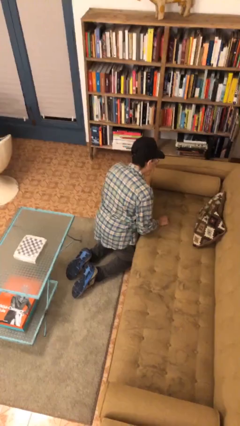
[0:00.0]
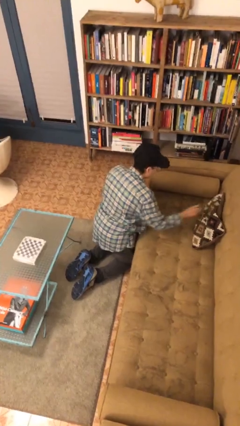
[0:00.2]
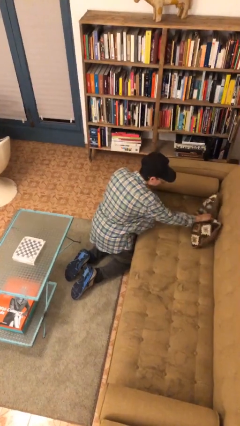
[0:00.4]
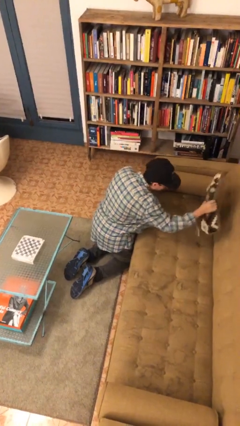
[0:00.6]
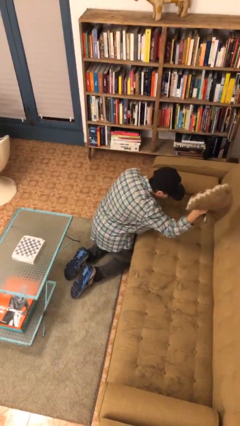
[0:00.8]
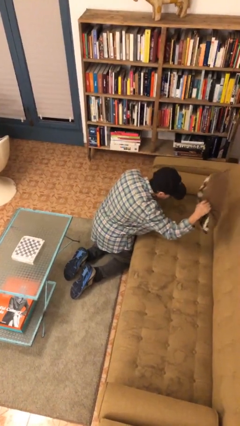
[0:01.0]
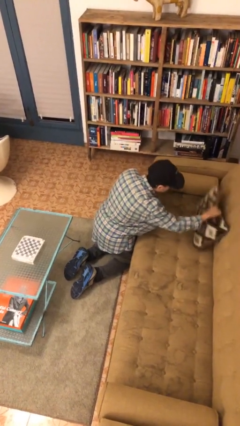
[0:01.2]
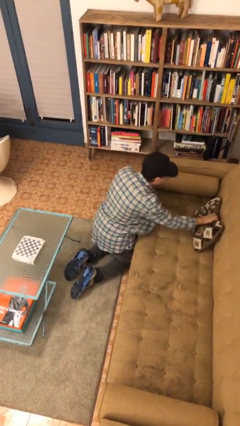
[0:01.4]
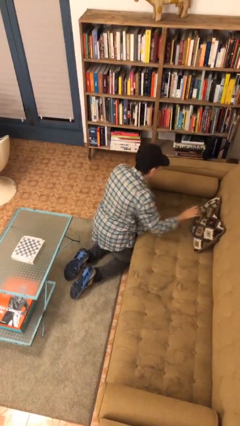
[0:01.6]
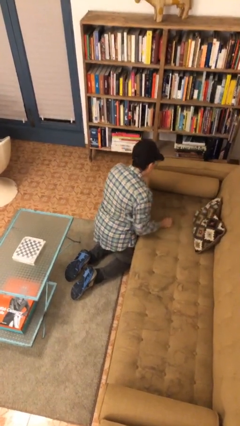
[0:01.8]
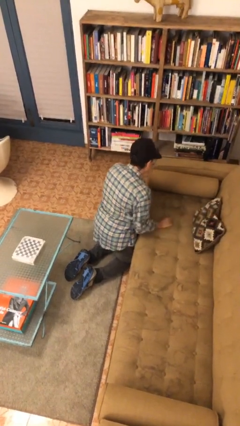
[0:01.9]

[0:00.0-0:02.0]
person searches in couch

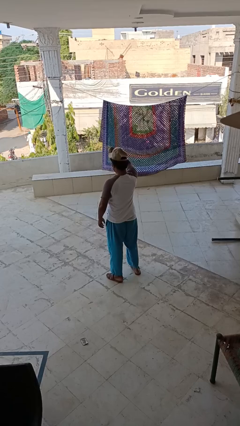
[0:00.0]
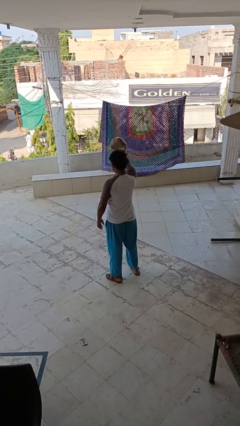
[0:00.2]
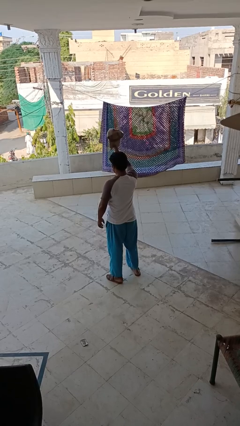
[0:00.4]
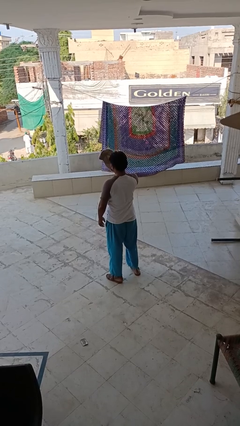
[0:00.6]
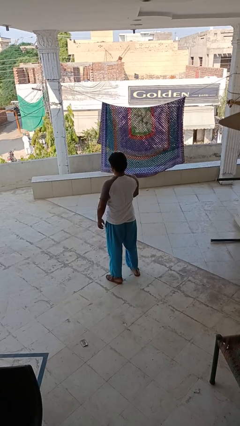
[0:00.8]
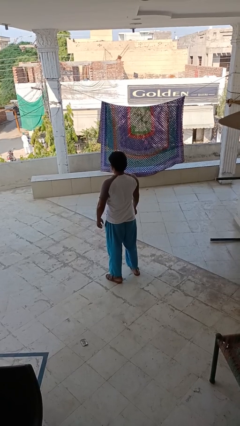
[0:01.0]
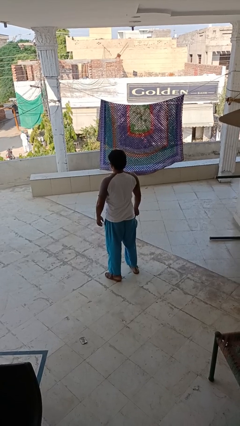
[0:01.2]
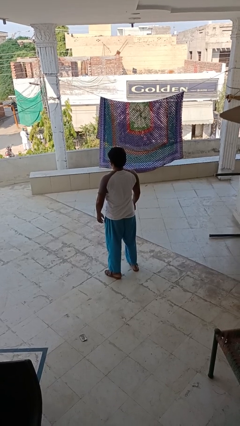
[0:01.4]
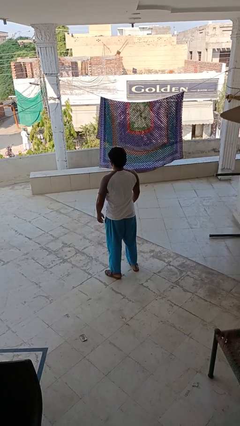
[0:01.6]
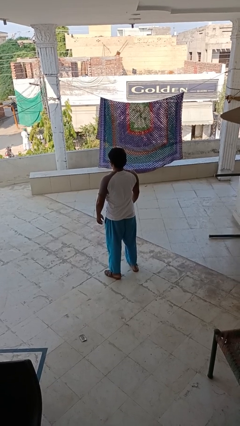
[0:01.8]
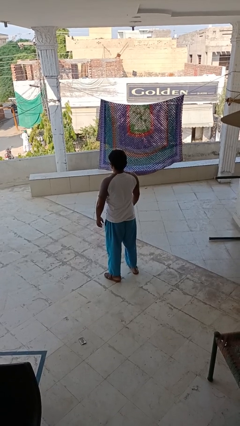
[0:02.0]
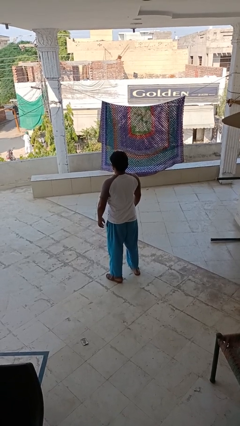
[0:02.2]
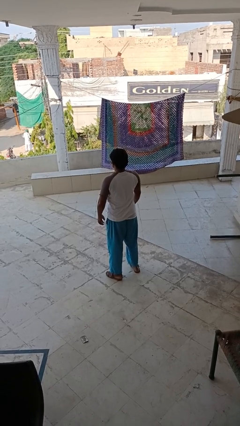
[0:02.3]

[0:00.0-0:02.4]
person takes off hat

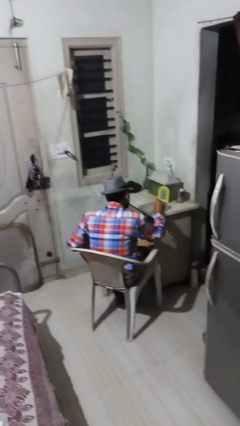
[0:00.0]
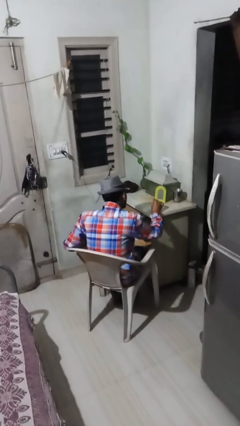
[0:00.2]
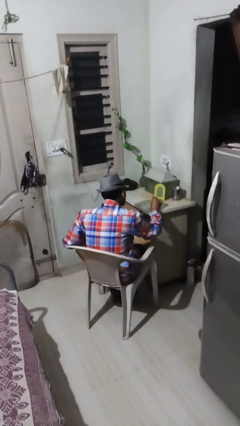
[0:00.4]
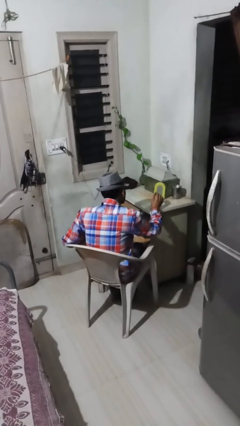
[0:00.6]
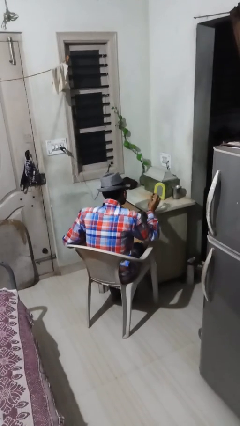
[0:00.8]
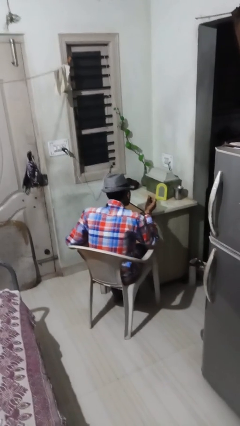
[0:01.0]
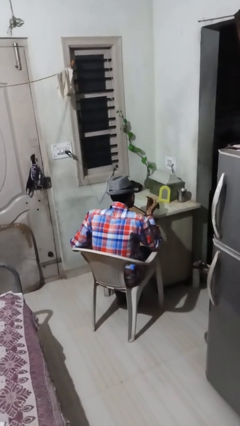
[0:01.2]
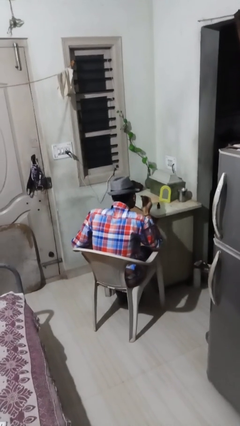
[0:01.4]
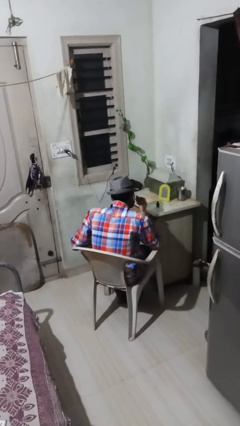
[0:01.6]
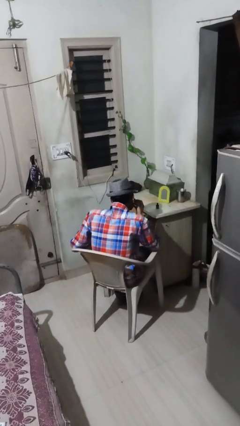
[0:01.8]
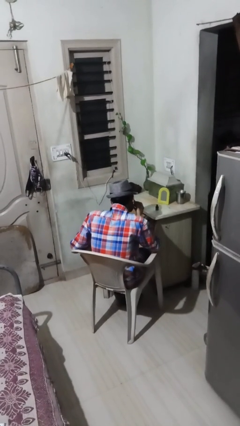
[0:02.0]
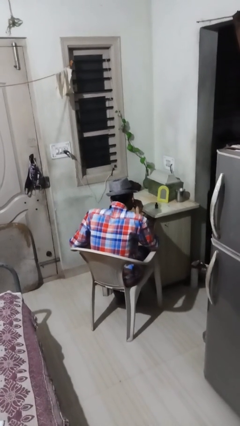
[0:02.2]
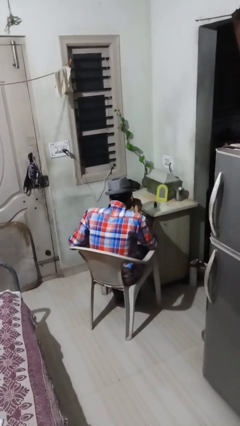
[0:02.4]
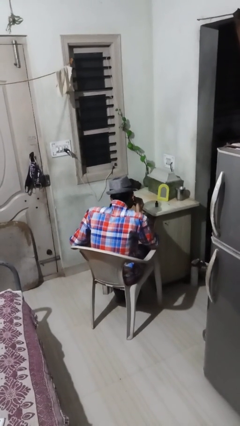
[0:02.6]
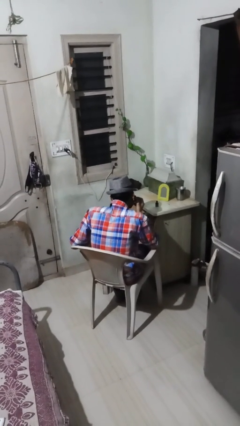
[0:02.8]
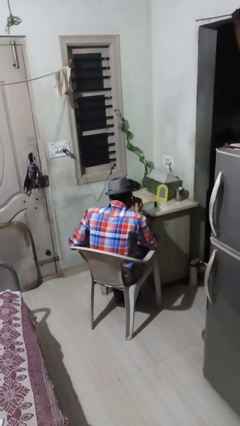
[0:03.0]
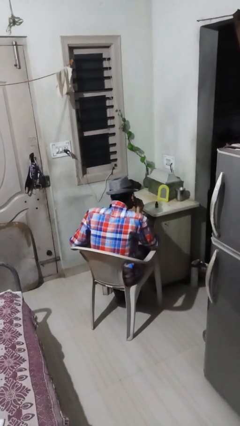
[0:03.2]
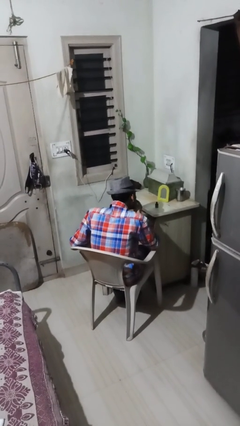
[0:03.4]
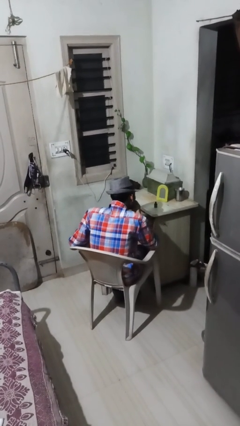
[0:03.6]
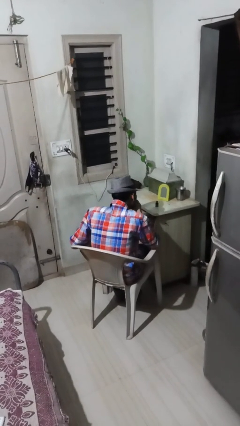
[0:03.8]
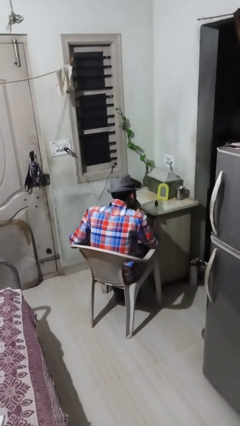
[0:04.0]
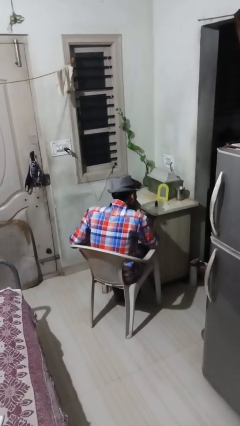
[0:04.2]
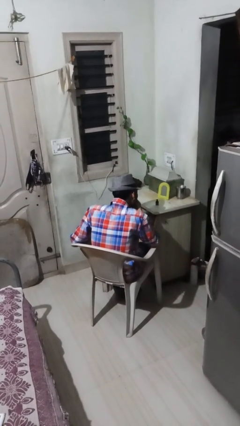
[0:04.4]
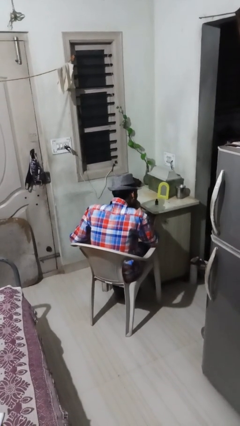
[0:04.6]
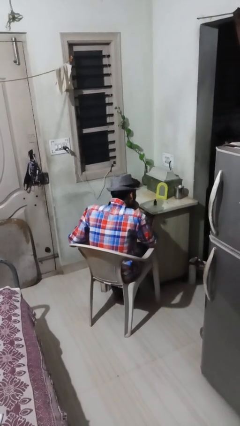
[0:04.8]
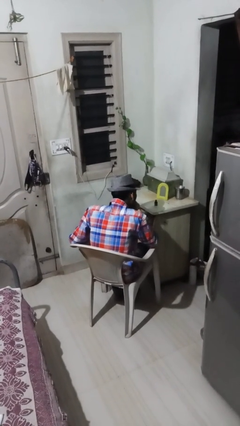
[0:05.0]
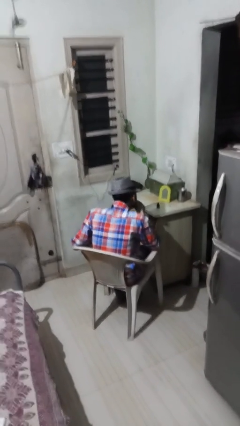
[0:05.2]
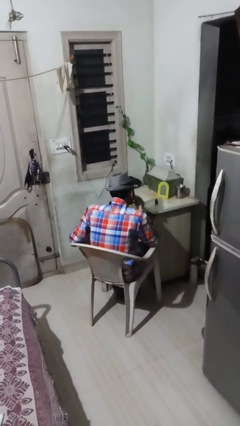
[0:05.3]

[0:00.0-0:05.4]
person applies eye makeup

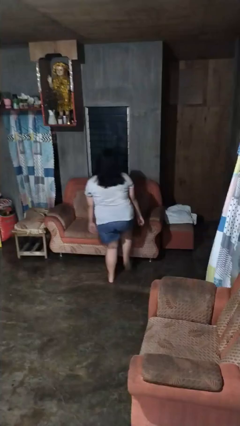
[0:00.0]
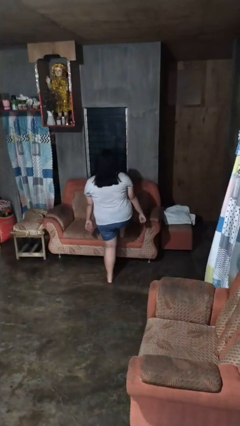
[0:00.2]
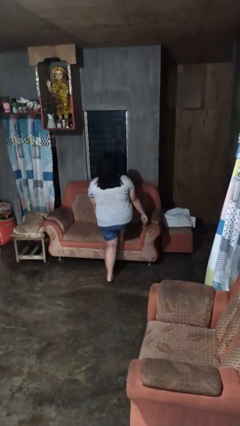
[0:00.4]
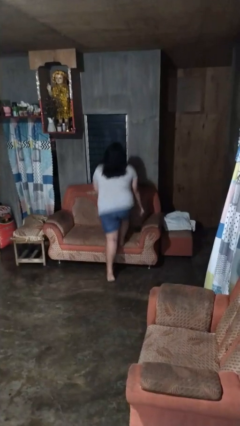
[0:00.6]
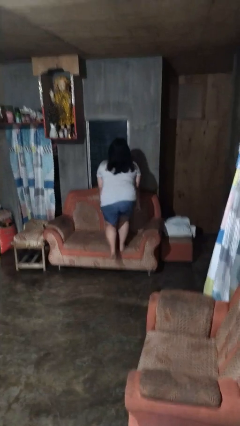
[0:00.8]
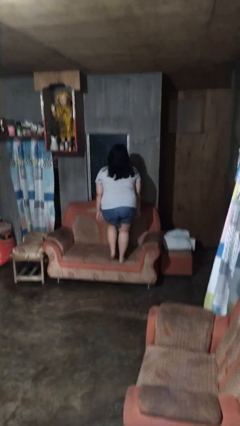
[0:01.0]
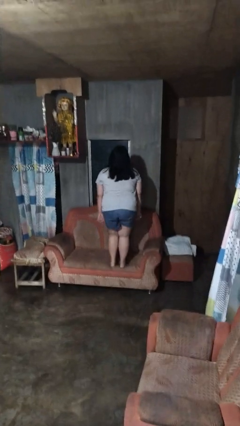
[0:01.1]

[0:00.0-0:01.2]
person climbs on couch

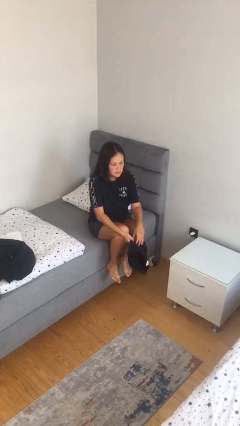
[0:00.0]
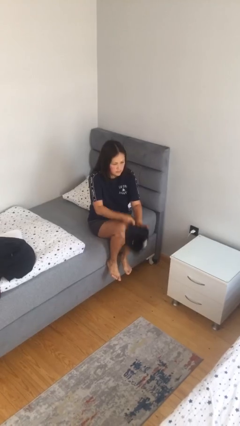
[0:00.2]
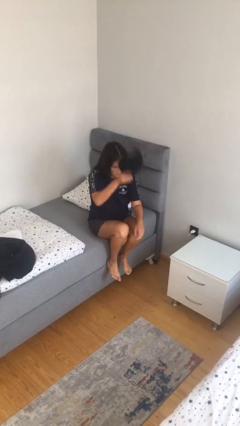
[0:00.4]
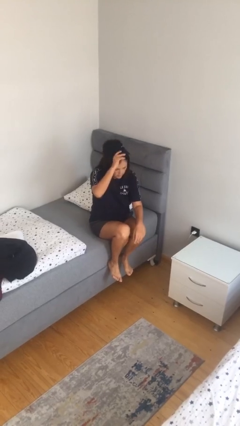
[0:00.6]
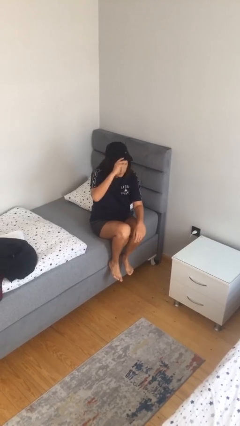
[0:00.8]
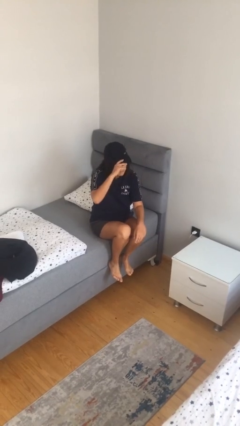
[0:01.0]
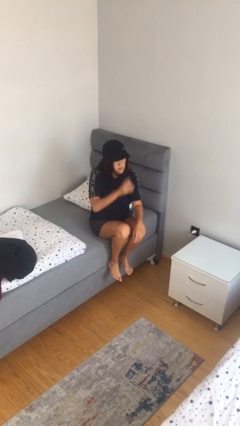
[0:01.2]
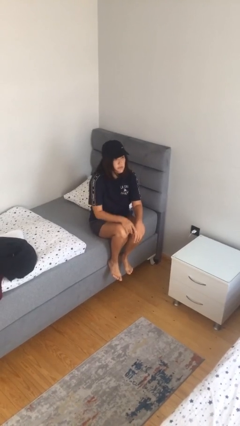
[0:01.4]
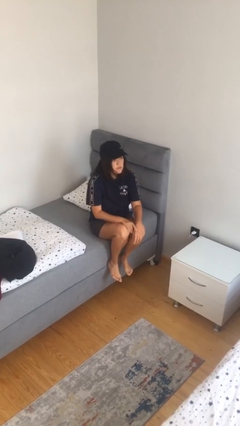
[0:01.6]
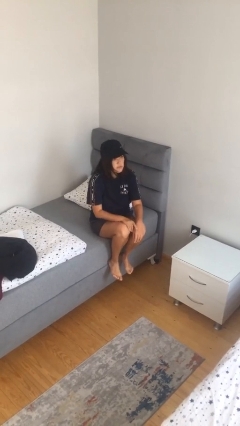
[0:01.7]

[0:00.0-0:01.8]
person puts on hat

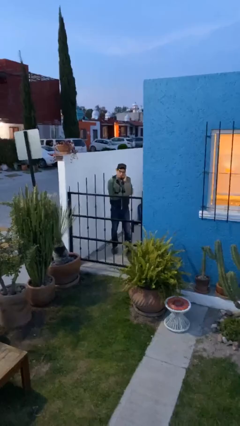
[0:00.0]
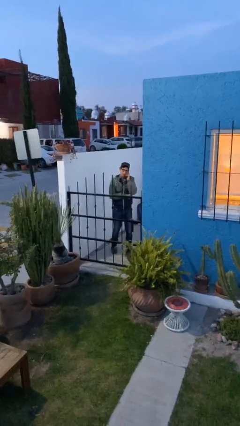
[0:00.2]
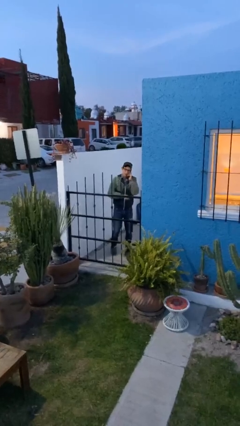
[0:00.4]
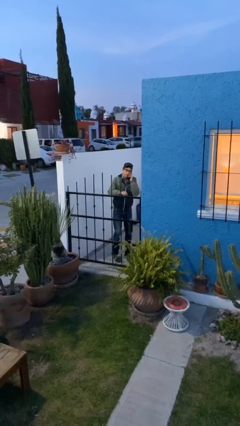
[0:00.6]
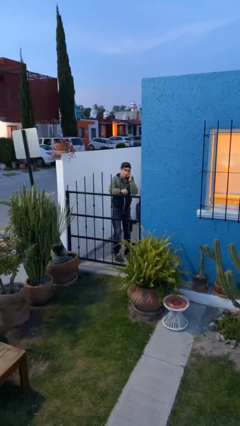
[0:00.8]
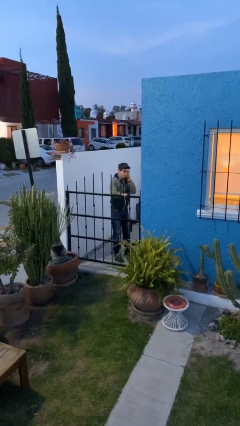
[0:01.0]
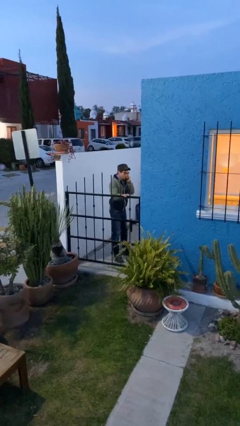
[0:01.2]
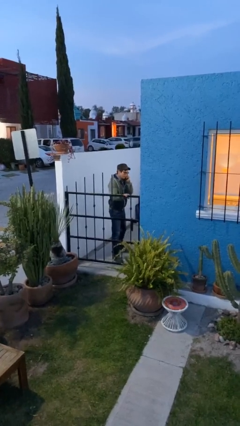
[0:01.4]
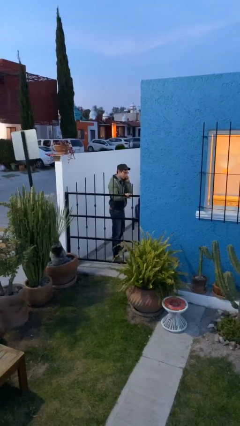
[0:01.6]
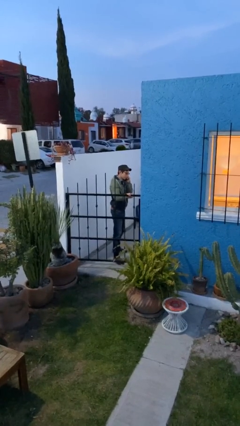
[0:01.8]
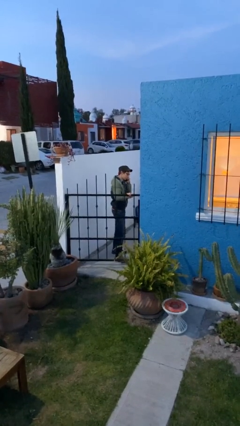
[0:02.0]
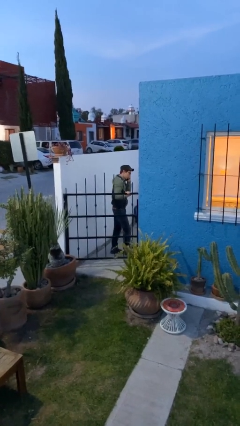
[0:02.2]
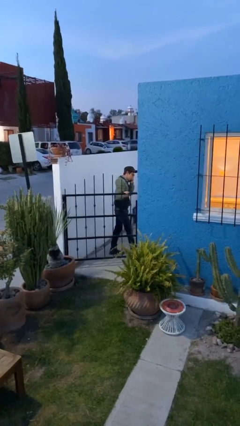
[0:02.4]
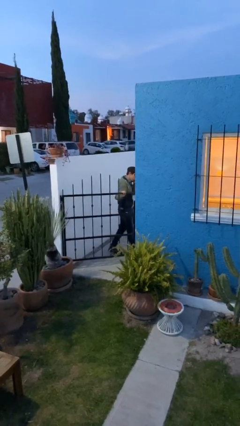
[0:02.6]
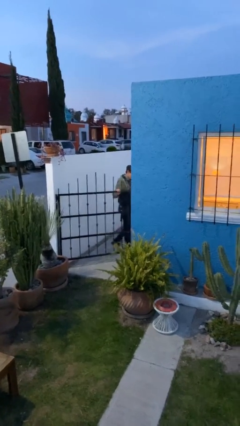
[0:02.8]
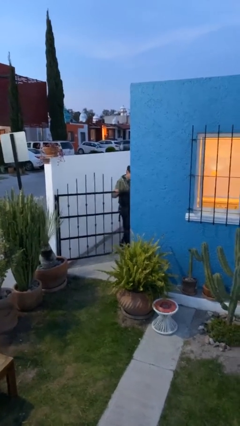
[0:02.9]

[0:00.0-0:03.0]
person opens facility door

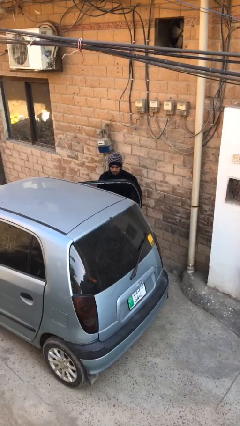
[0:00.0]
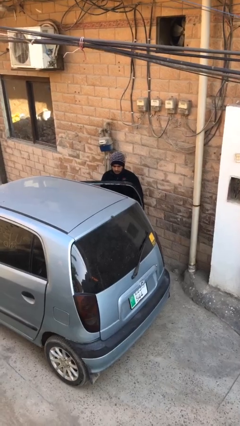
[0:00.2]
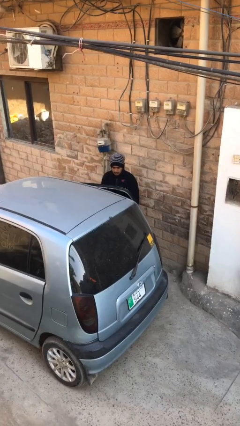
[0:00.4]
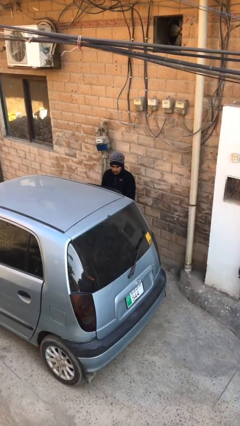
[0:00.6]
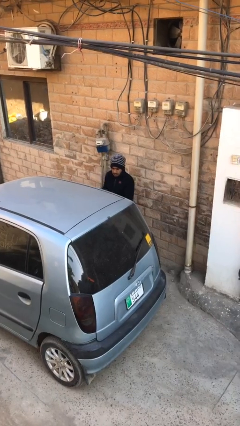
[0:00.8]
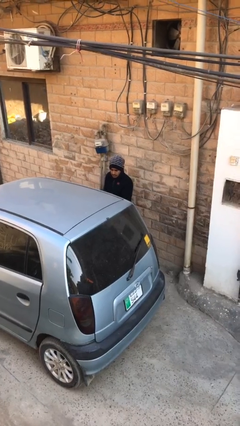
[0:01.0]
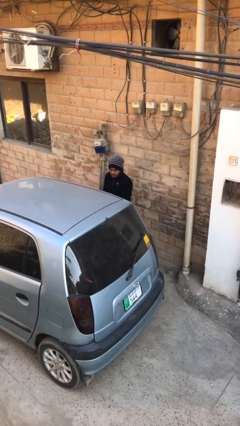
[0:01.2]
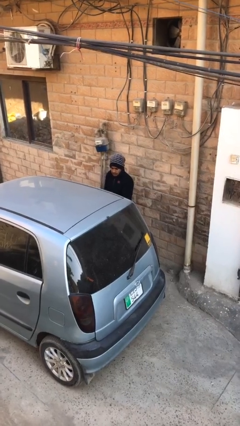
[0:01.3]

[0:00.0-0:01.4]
person closes car door
